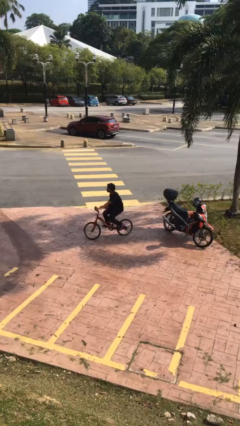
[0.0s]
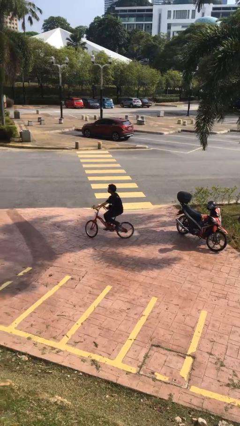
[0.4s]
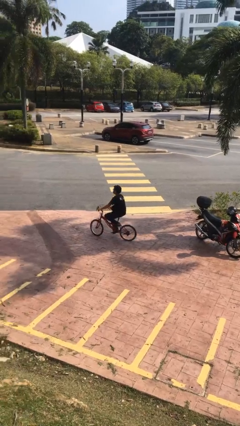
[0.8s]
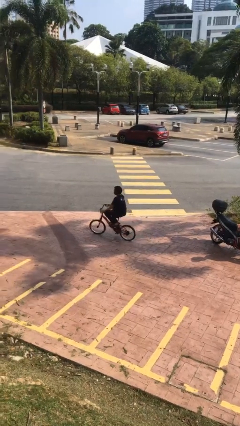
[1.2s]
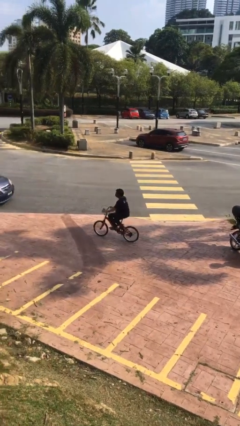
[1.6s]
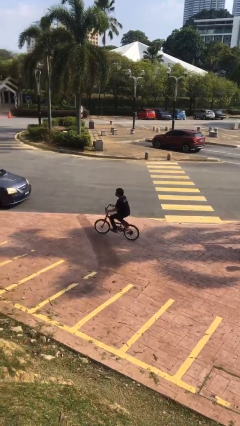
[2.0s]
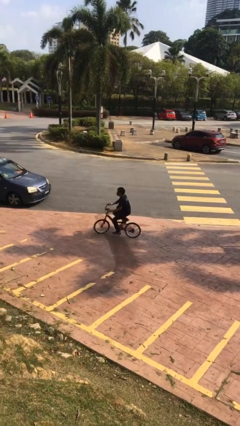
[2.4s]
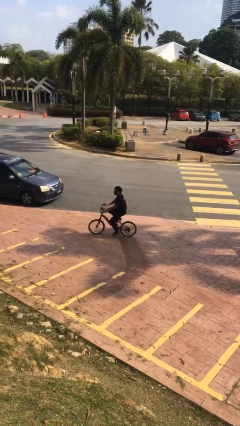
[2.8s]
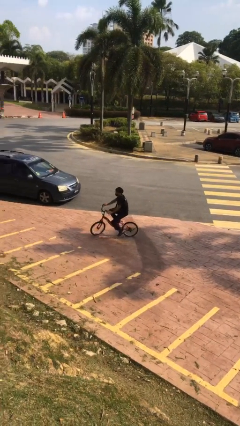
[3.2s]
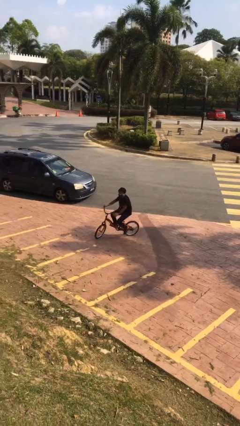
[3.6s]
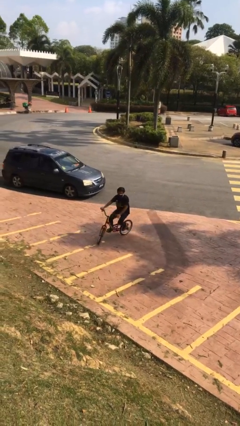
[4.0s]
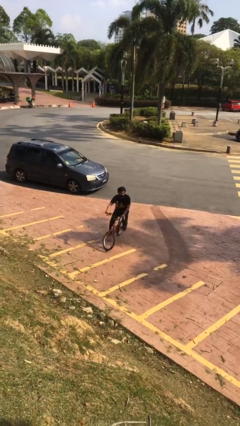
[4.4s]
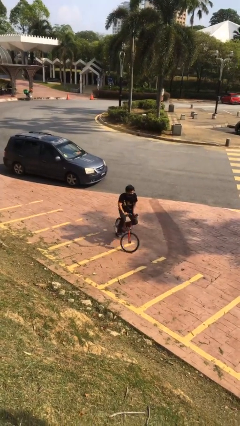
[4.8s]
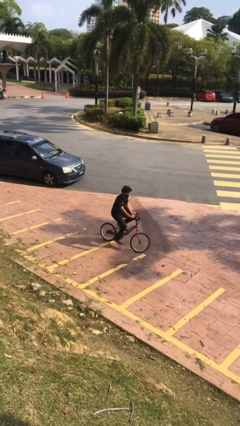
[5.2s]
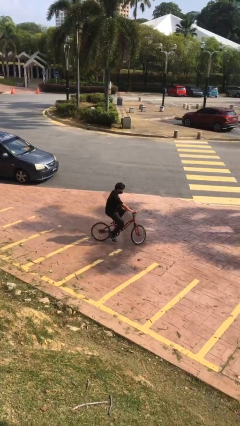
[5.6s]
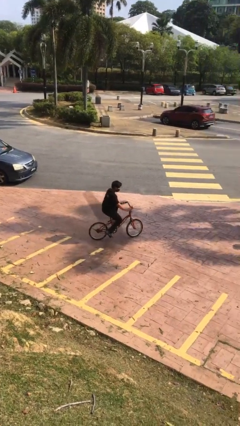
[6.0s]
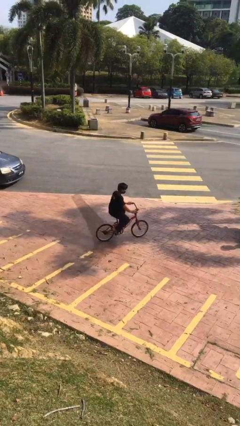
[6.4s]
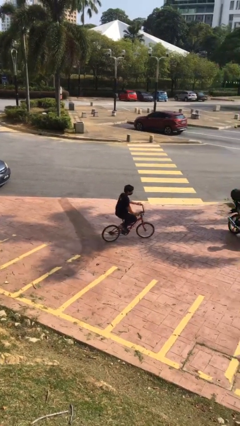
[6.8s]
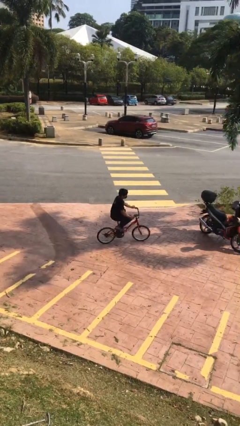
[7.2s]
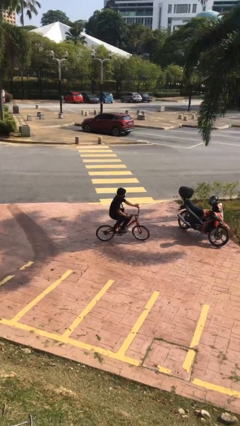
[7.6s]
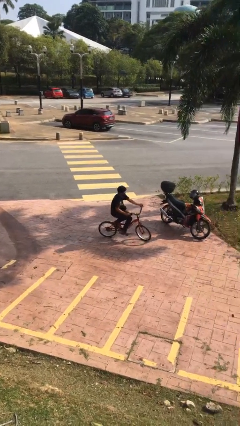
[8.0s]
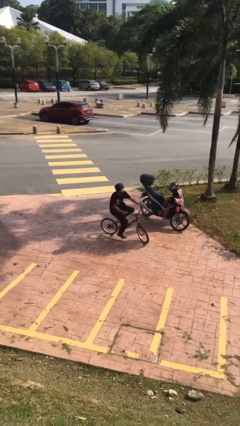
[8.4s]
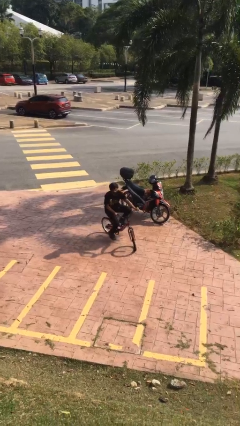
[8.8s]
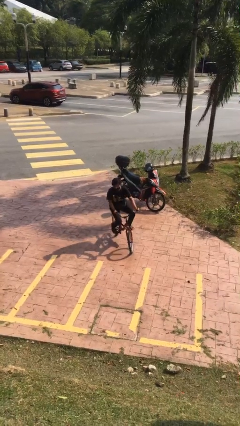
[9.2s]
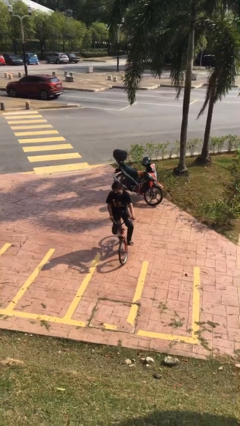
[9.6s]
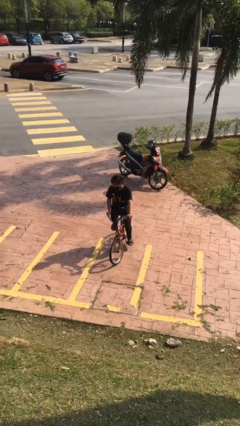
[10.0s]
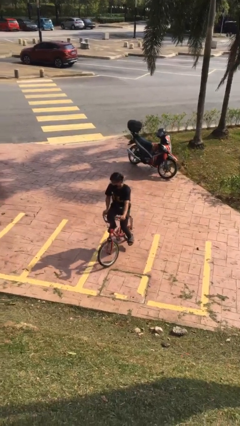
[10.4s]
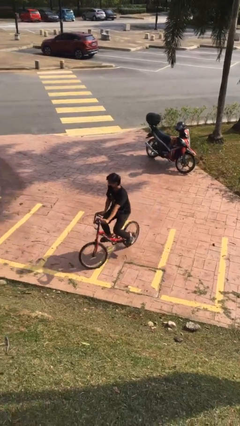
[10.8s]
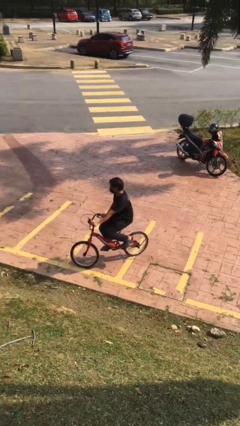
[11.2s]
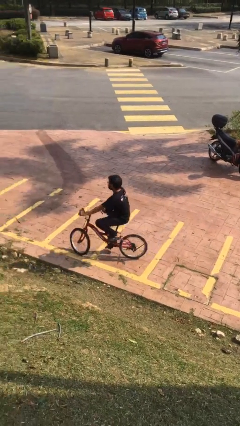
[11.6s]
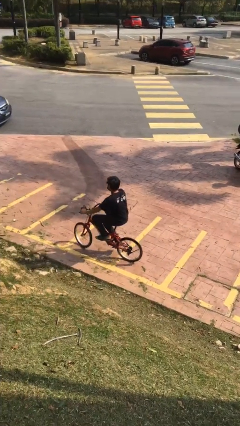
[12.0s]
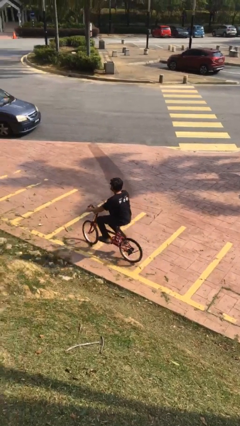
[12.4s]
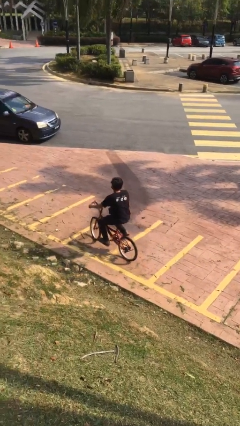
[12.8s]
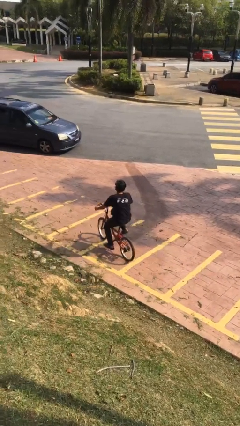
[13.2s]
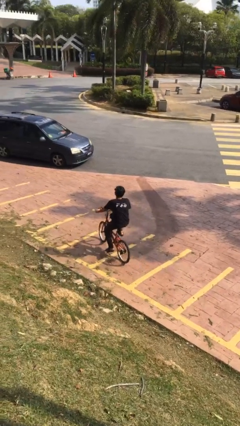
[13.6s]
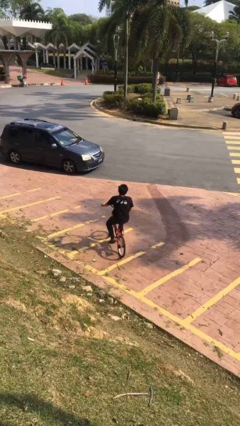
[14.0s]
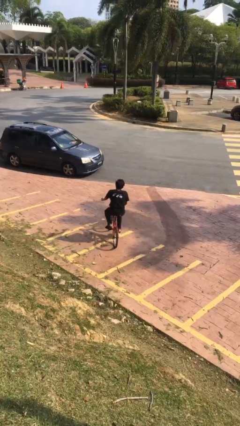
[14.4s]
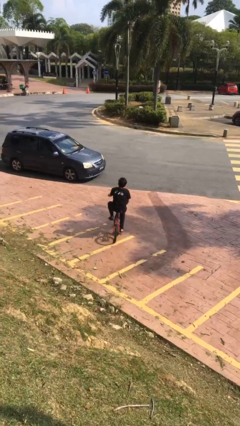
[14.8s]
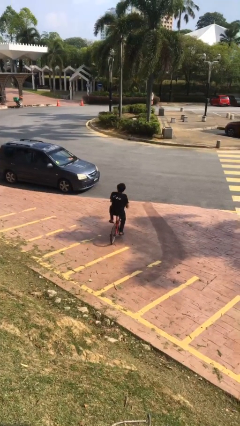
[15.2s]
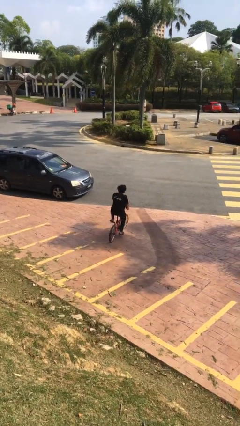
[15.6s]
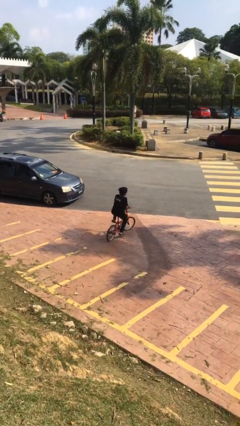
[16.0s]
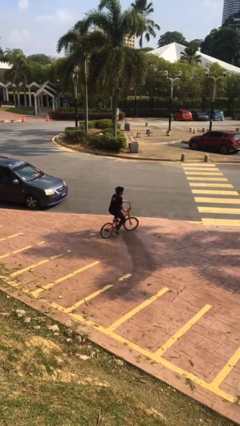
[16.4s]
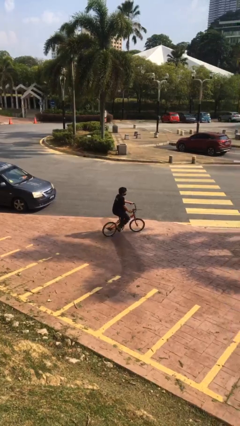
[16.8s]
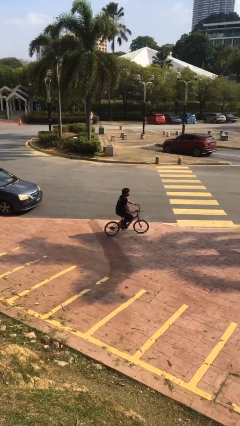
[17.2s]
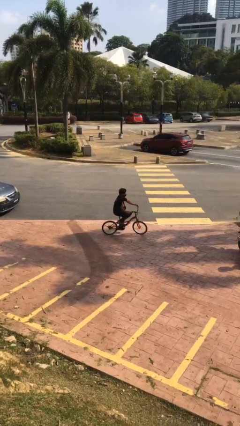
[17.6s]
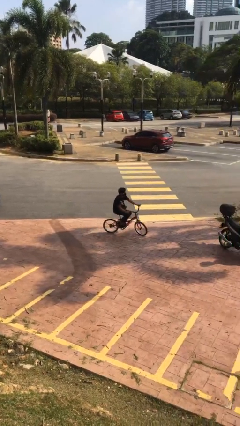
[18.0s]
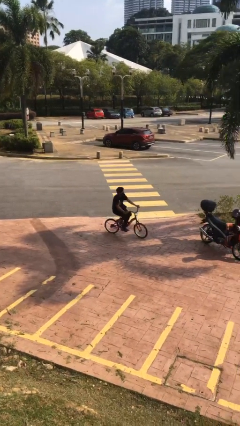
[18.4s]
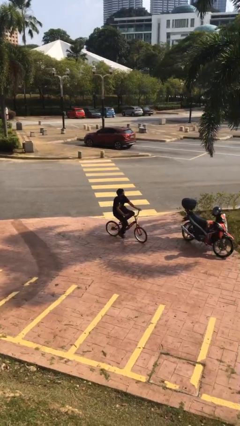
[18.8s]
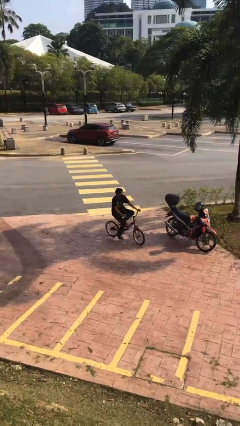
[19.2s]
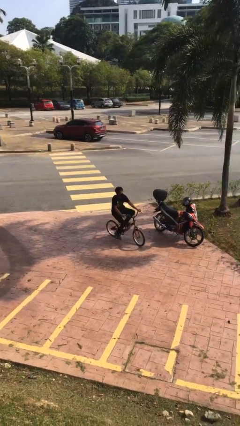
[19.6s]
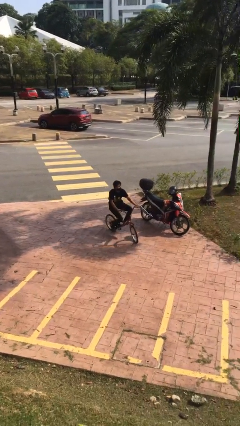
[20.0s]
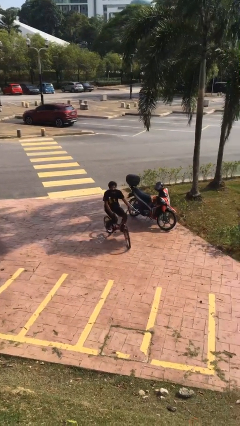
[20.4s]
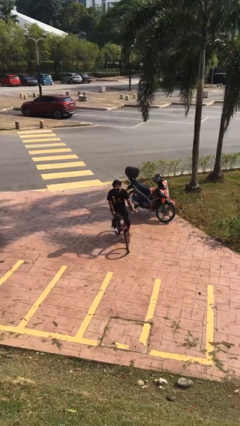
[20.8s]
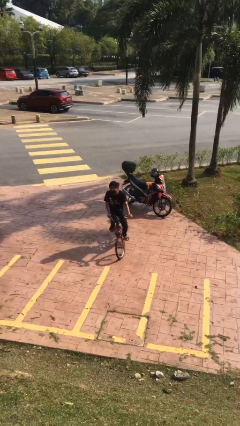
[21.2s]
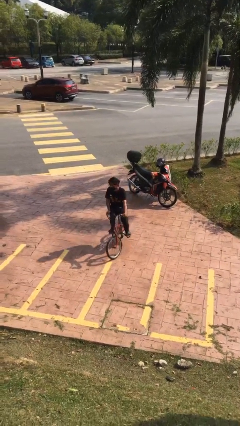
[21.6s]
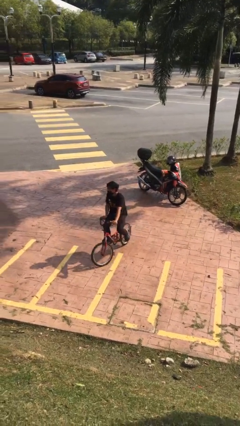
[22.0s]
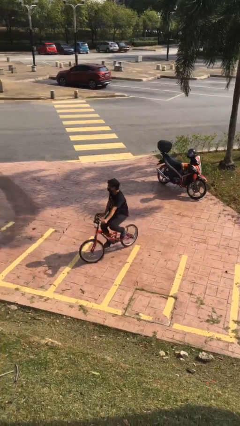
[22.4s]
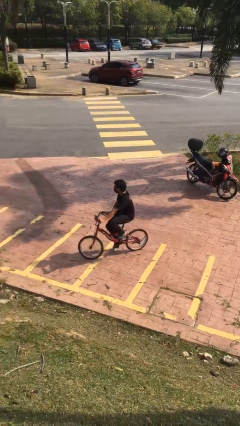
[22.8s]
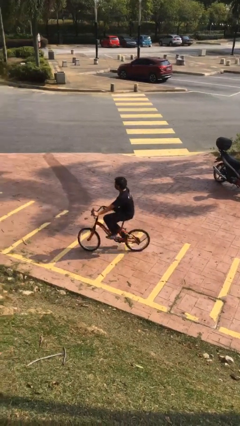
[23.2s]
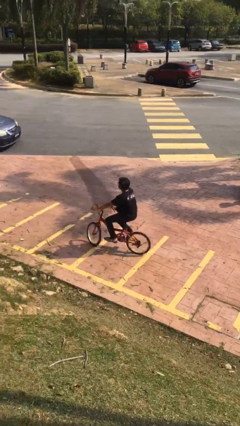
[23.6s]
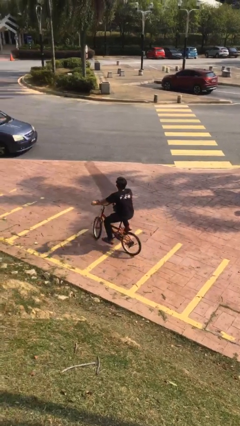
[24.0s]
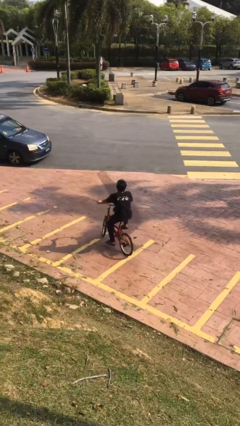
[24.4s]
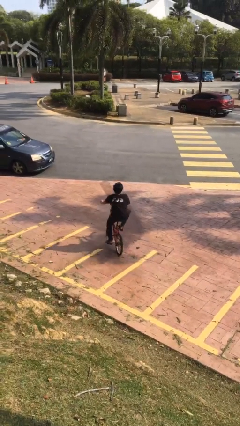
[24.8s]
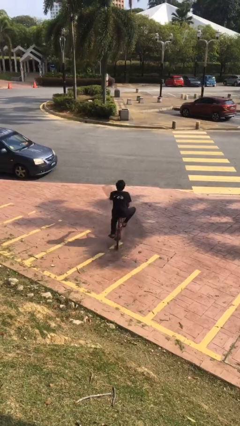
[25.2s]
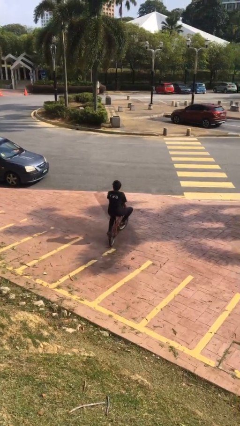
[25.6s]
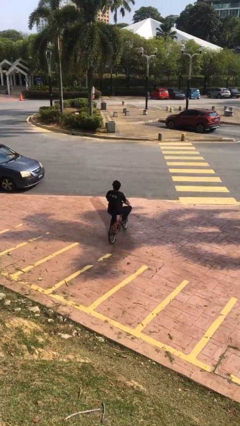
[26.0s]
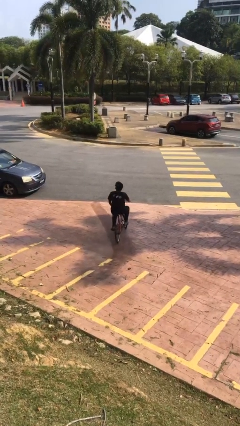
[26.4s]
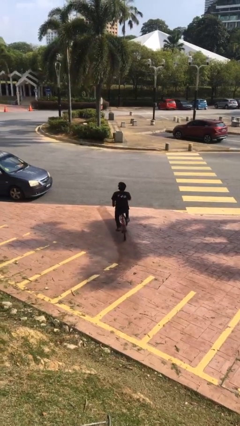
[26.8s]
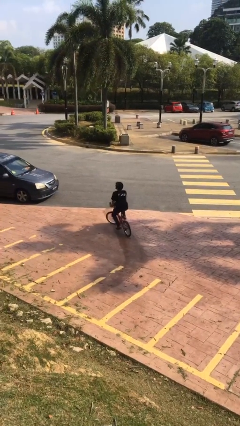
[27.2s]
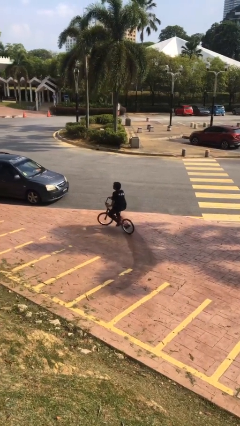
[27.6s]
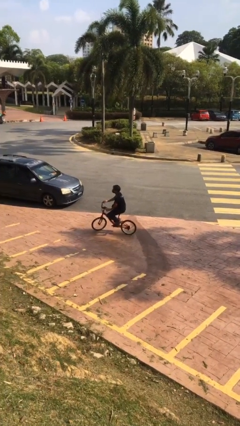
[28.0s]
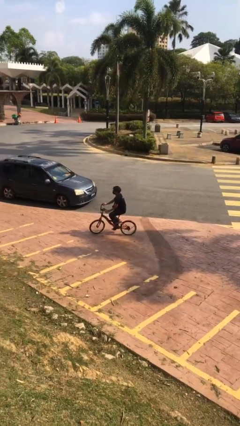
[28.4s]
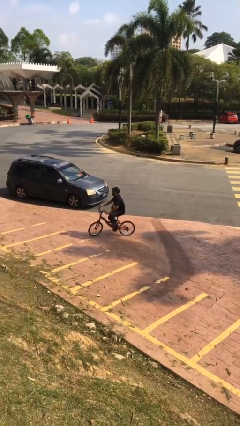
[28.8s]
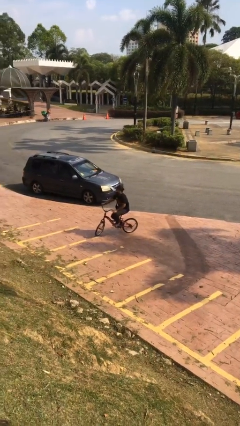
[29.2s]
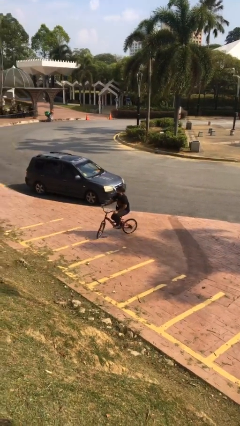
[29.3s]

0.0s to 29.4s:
person rides bicycle

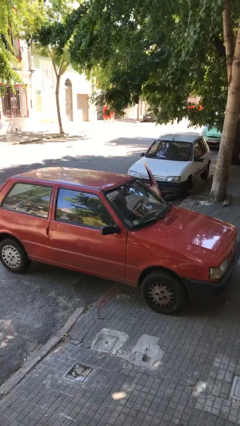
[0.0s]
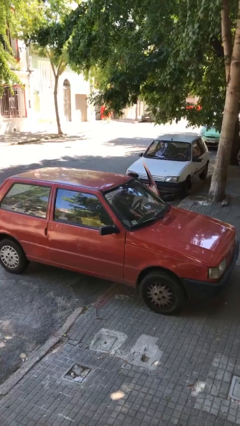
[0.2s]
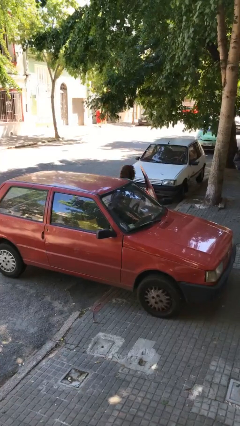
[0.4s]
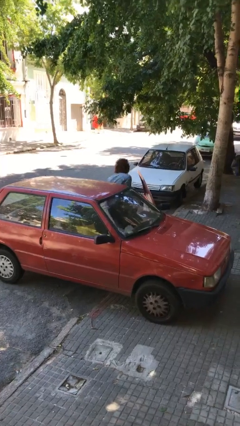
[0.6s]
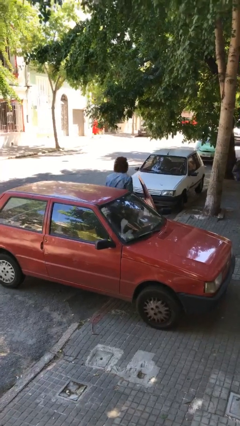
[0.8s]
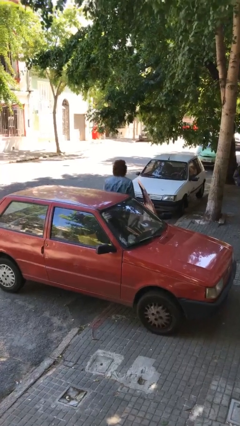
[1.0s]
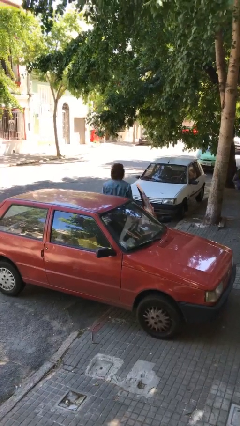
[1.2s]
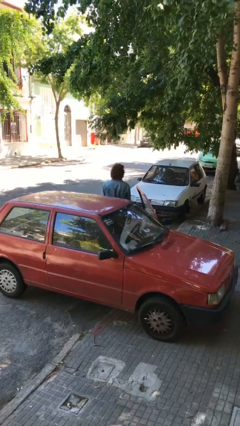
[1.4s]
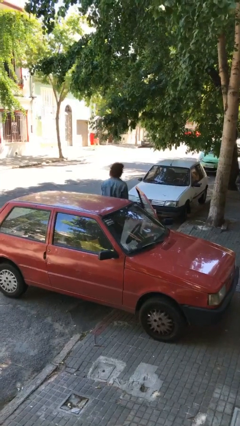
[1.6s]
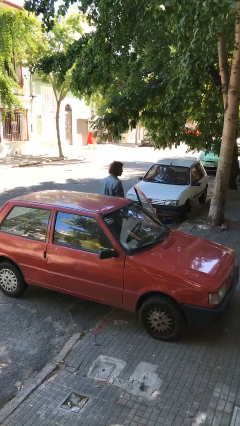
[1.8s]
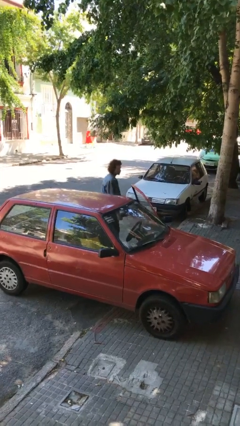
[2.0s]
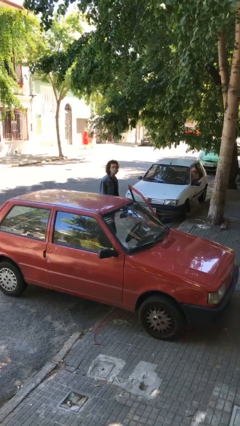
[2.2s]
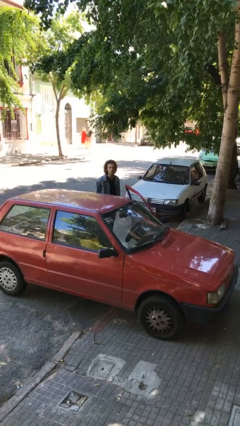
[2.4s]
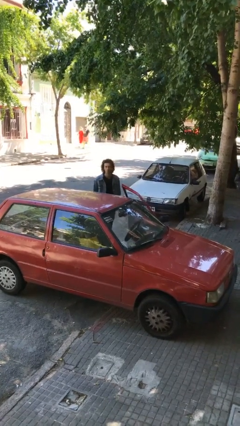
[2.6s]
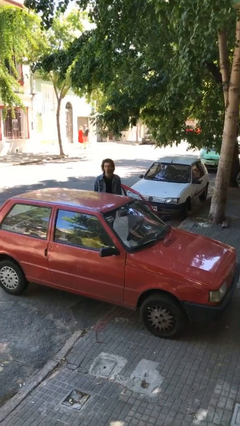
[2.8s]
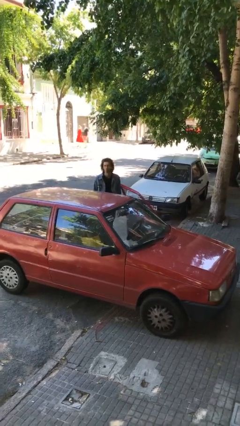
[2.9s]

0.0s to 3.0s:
person exits car

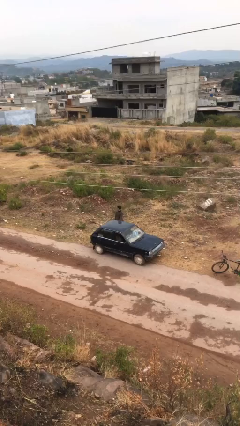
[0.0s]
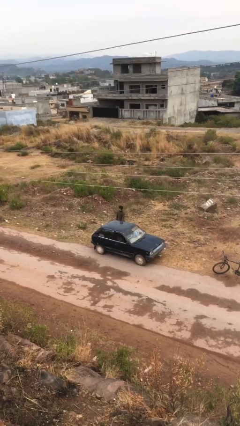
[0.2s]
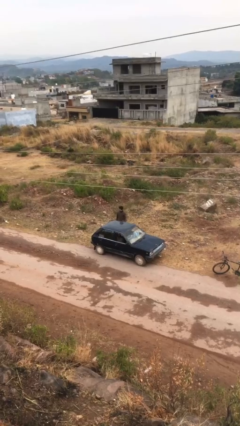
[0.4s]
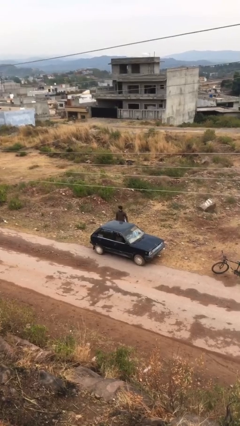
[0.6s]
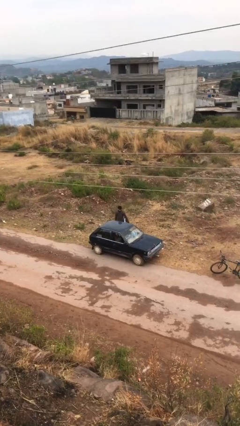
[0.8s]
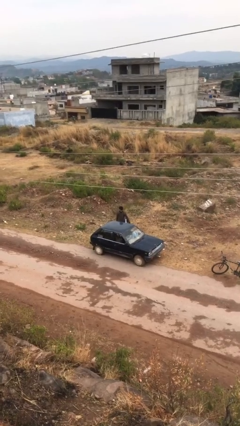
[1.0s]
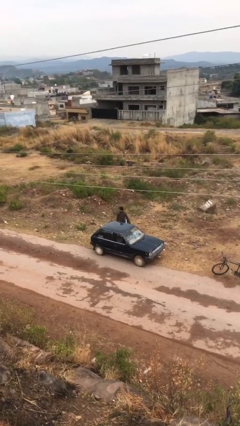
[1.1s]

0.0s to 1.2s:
person opens car door
